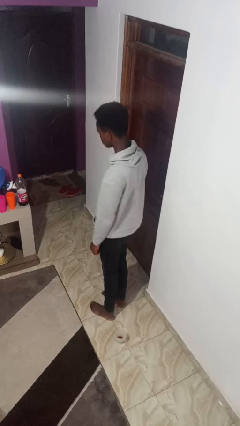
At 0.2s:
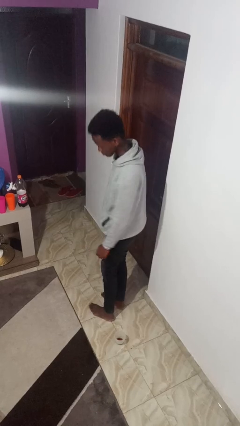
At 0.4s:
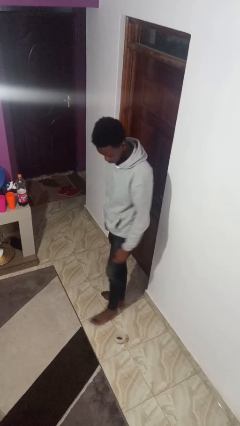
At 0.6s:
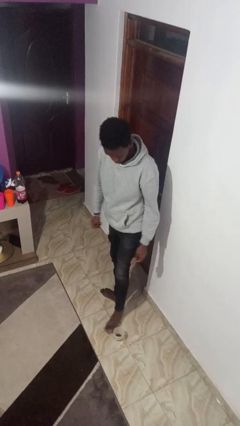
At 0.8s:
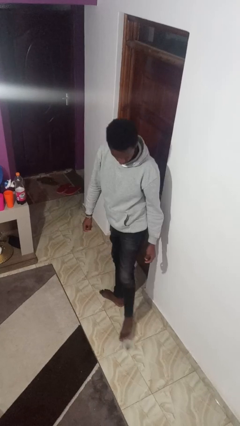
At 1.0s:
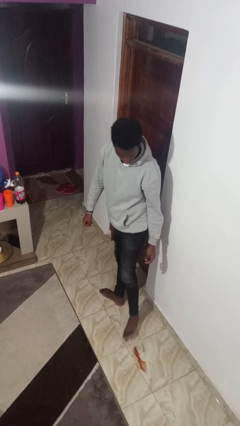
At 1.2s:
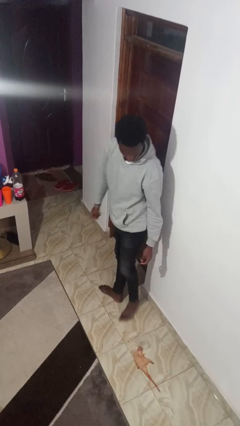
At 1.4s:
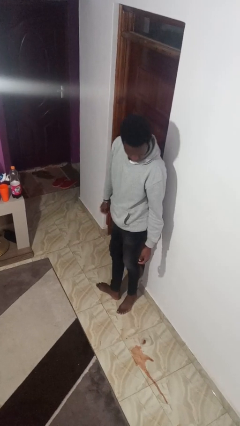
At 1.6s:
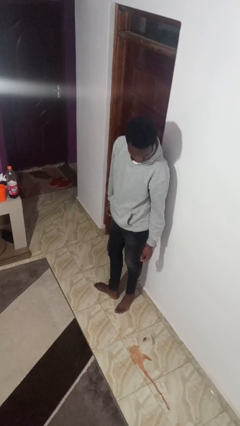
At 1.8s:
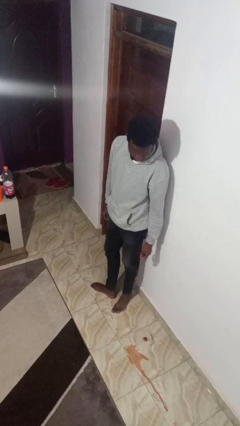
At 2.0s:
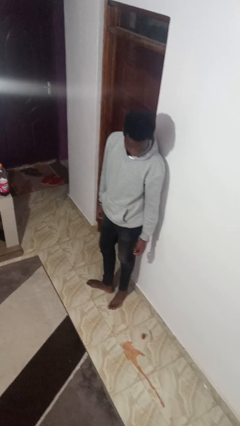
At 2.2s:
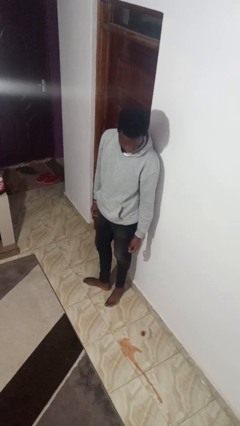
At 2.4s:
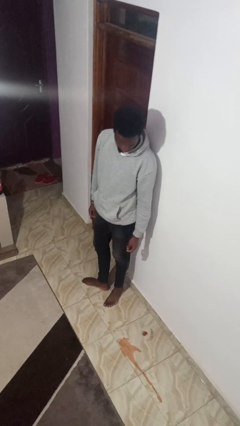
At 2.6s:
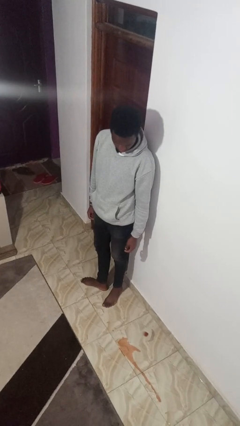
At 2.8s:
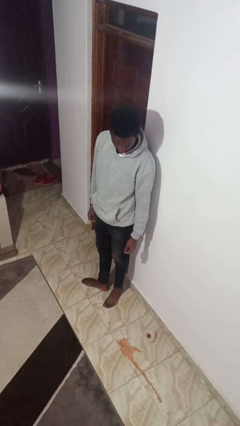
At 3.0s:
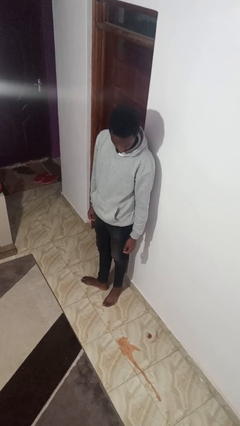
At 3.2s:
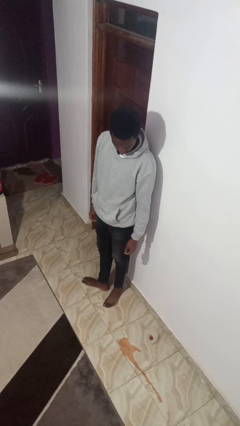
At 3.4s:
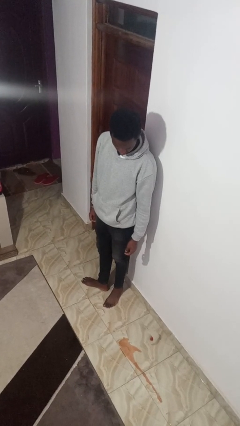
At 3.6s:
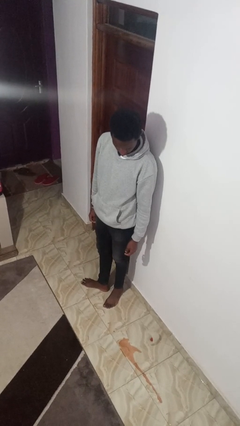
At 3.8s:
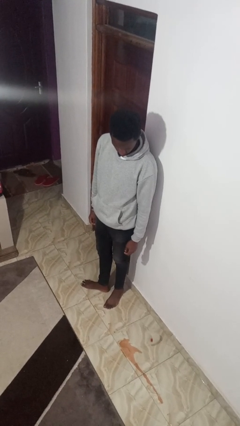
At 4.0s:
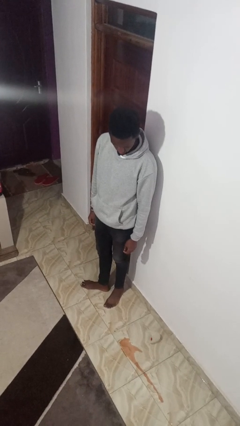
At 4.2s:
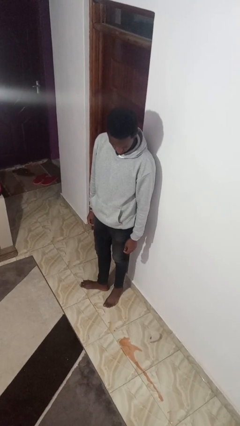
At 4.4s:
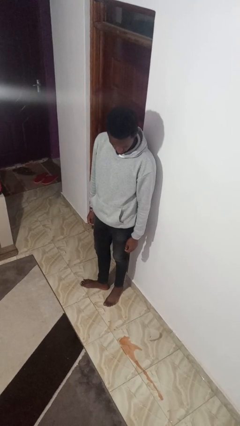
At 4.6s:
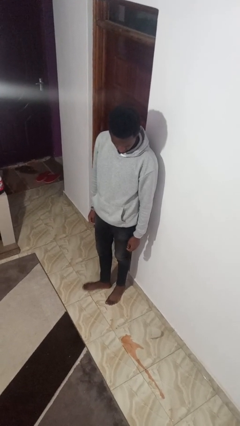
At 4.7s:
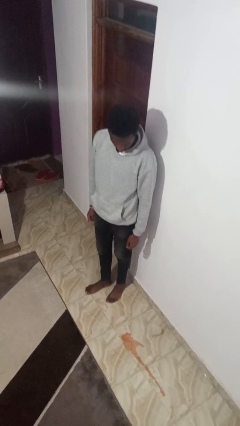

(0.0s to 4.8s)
person spills on floor

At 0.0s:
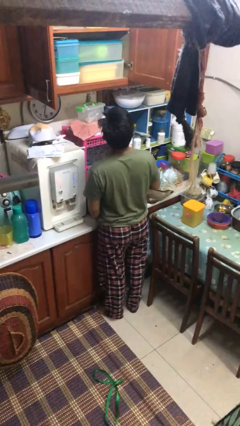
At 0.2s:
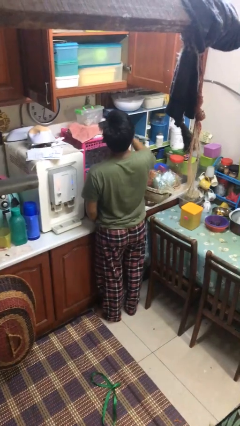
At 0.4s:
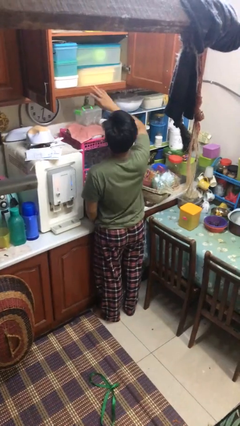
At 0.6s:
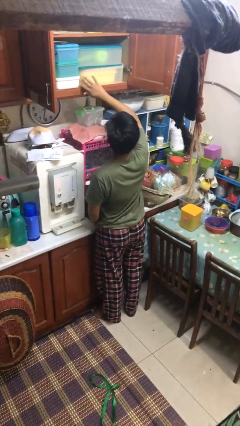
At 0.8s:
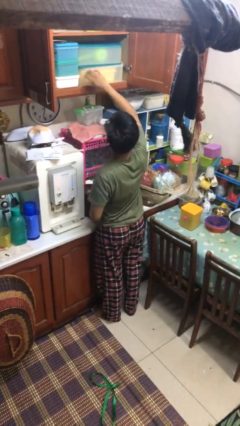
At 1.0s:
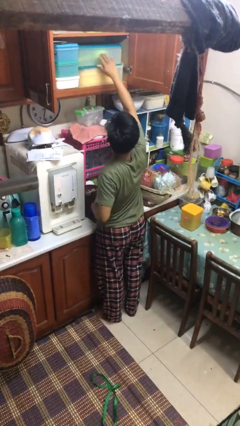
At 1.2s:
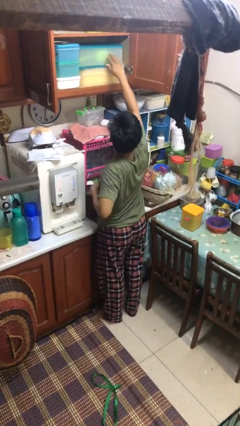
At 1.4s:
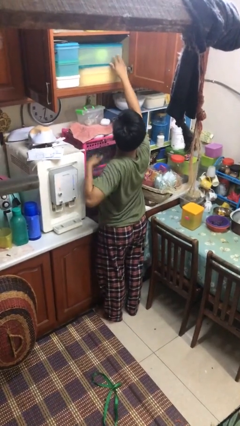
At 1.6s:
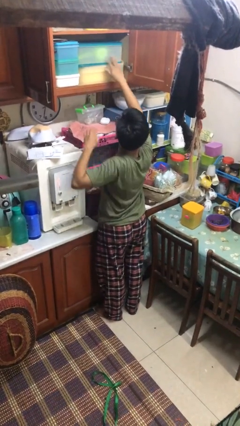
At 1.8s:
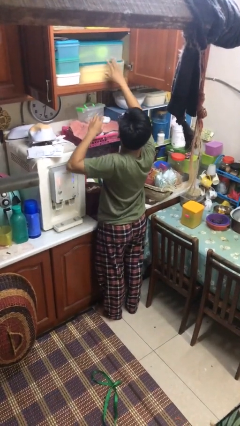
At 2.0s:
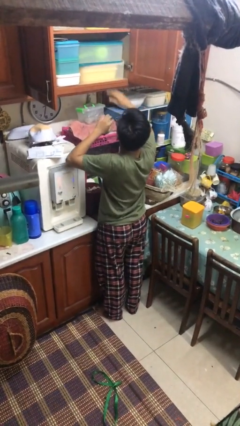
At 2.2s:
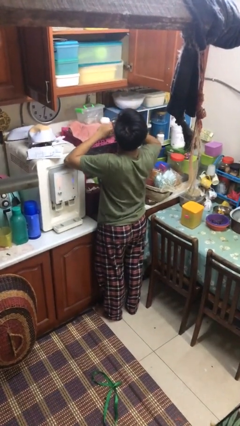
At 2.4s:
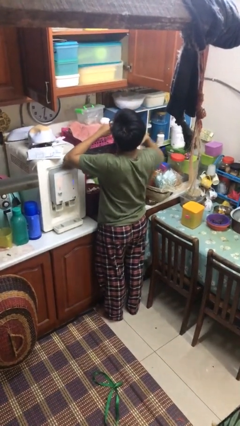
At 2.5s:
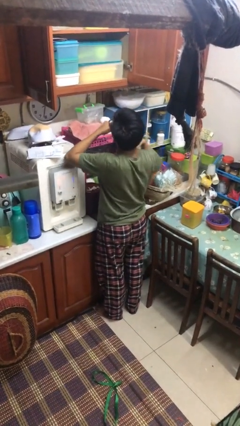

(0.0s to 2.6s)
person searches in kitchen drawer

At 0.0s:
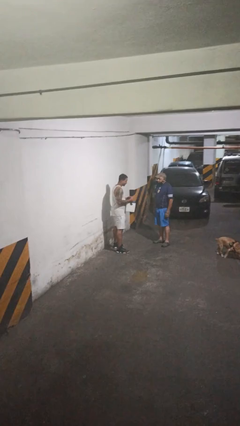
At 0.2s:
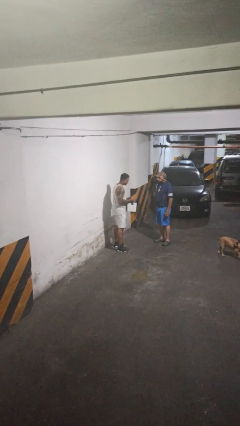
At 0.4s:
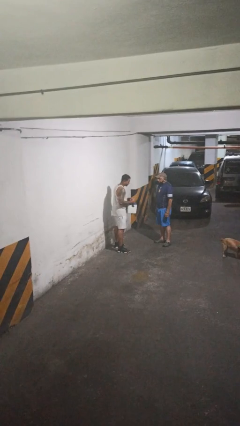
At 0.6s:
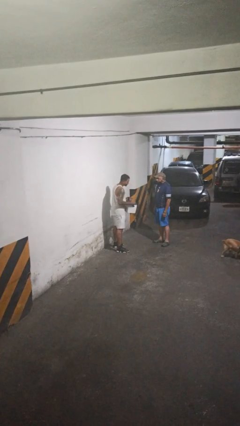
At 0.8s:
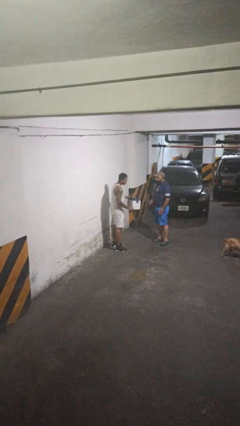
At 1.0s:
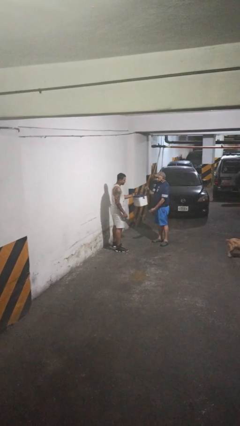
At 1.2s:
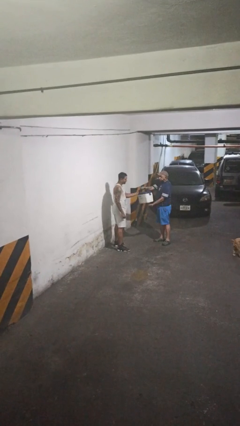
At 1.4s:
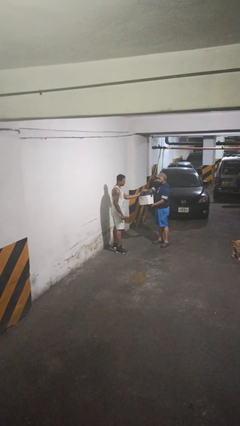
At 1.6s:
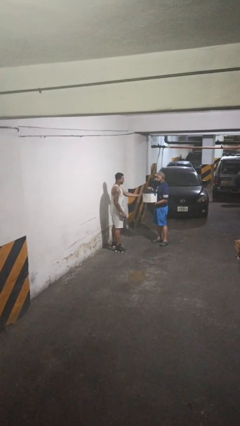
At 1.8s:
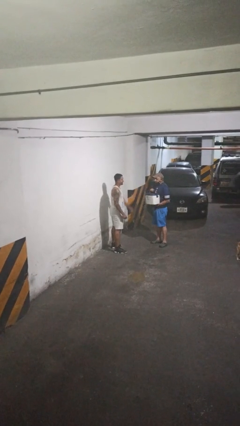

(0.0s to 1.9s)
person transfers object to person

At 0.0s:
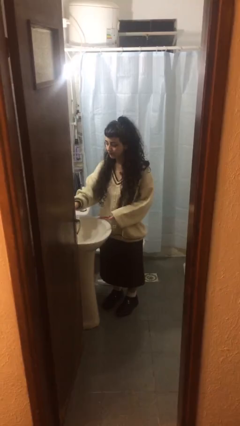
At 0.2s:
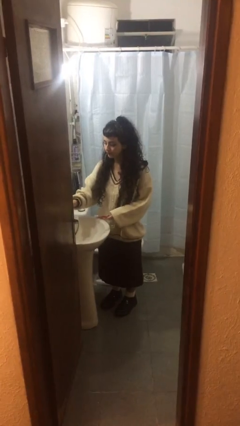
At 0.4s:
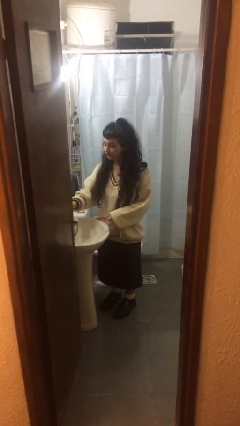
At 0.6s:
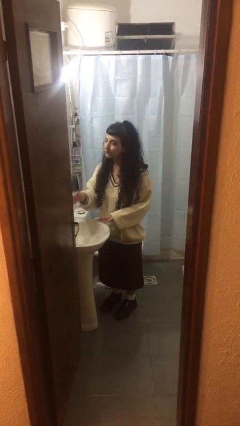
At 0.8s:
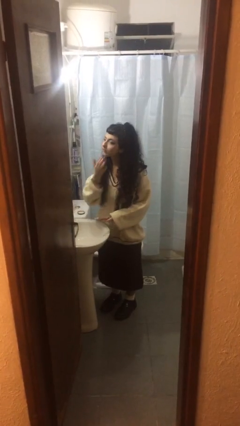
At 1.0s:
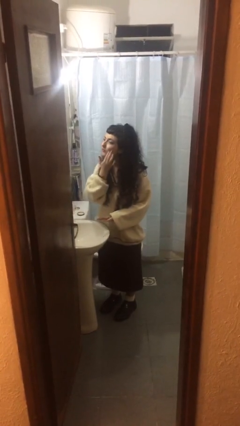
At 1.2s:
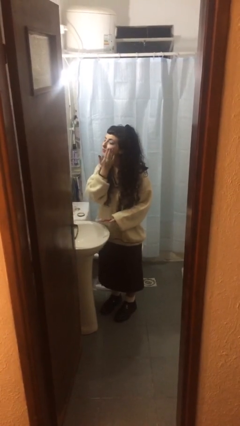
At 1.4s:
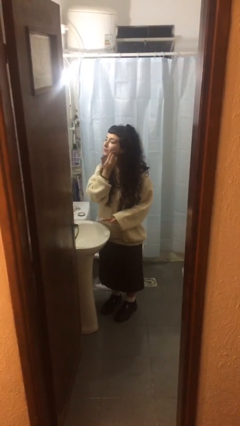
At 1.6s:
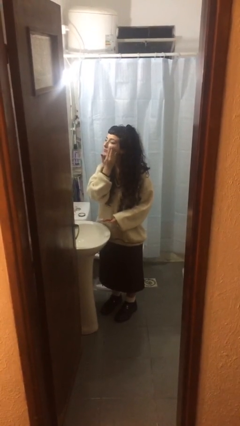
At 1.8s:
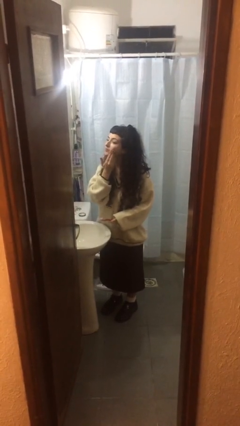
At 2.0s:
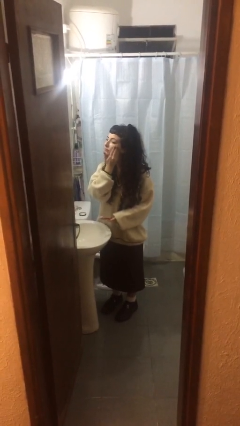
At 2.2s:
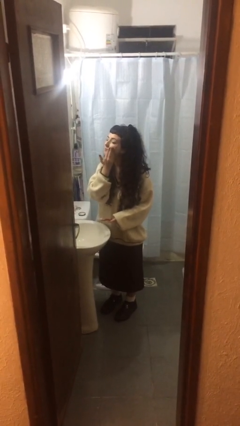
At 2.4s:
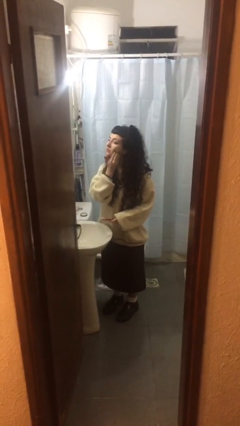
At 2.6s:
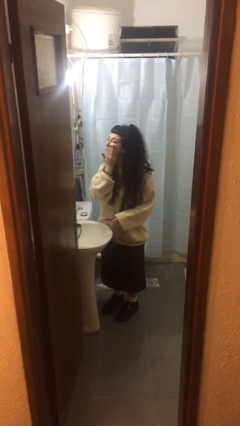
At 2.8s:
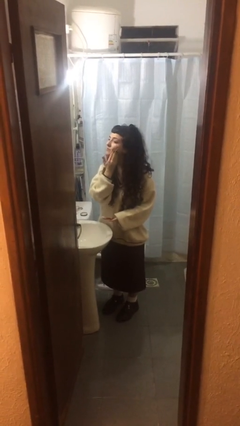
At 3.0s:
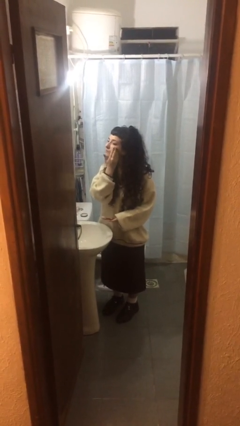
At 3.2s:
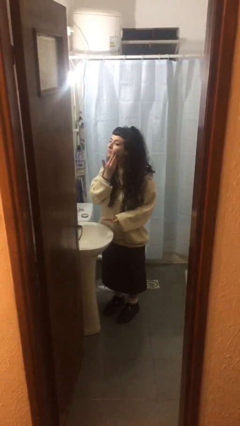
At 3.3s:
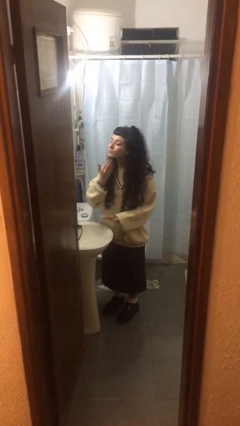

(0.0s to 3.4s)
person applies shaving cream

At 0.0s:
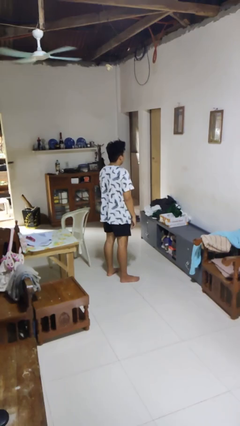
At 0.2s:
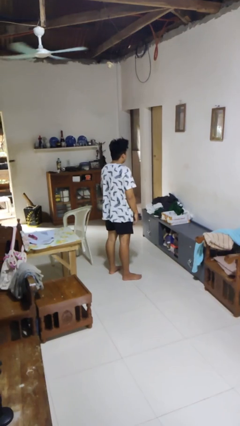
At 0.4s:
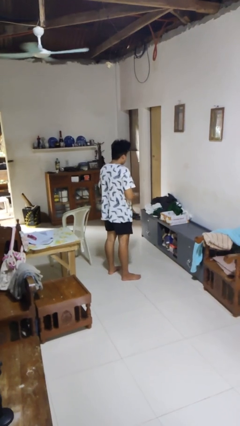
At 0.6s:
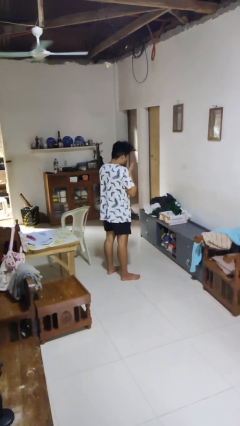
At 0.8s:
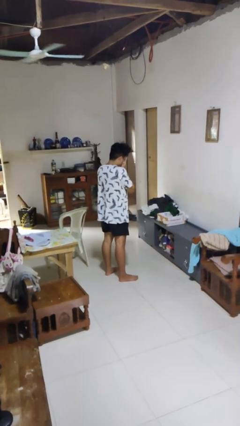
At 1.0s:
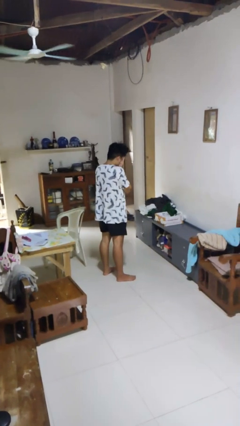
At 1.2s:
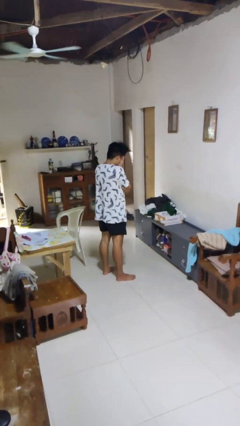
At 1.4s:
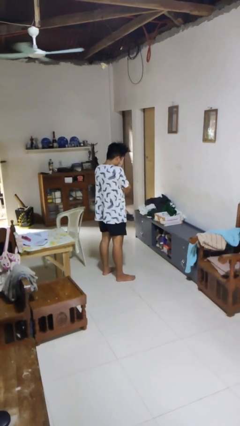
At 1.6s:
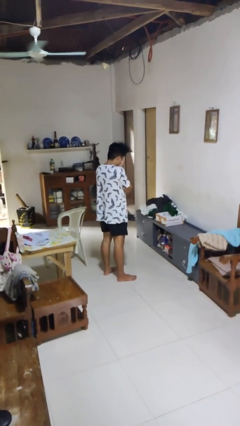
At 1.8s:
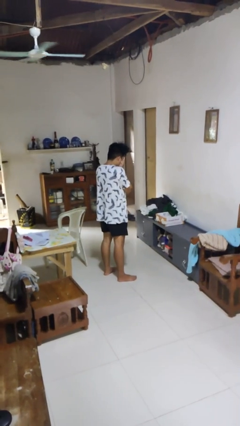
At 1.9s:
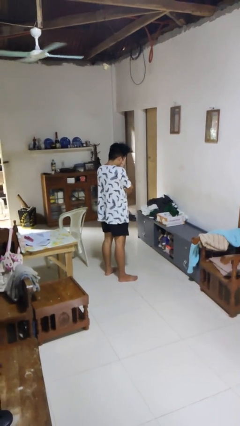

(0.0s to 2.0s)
person covers face with hands

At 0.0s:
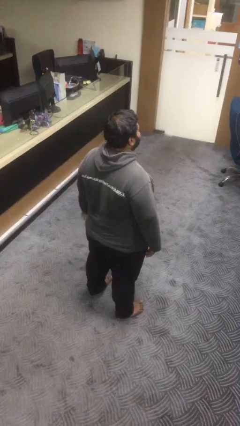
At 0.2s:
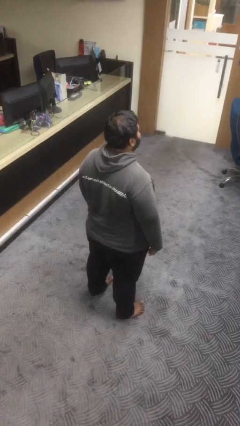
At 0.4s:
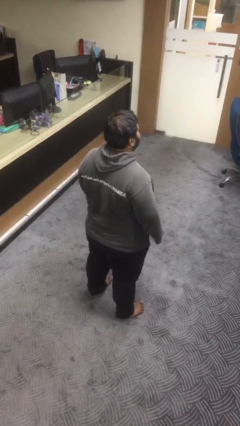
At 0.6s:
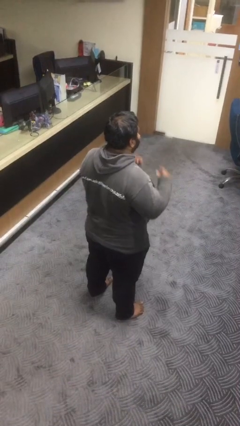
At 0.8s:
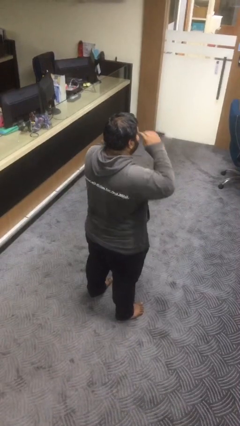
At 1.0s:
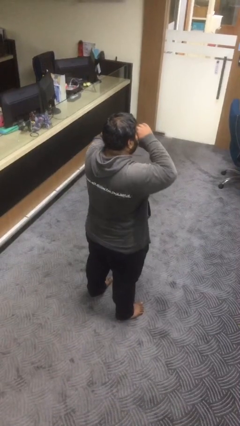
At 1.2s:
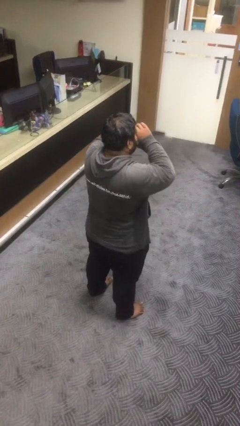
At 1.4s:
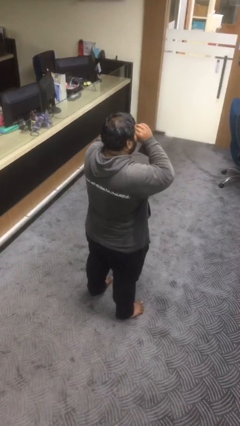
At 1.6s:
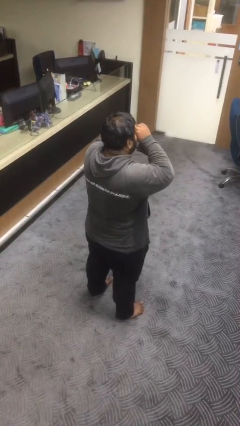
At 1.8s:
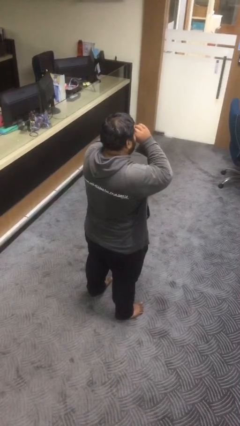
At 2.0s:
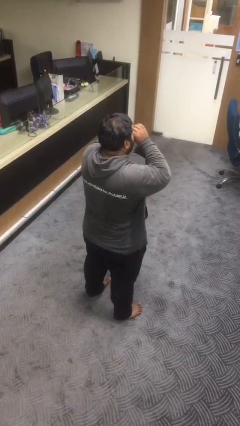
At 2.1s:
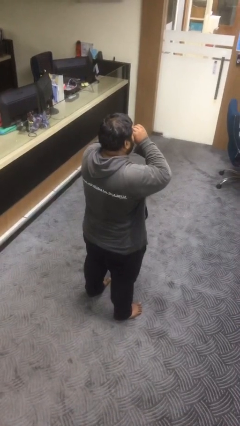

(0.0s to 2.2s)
person rubs eyes

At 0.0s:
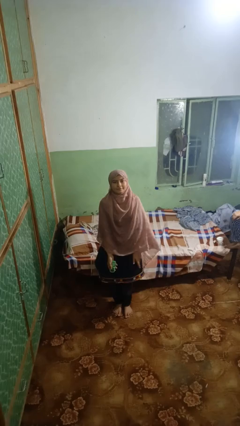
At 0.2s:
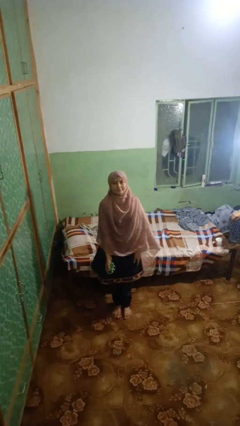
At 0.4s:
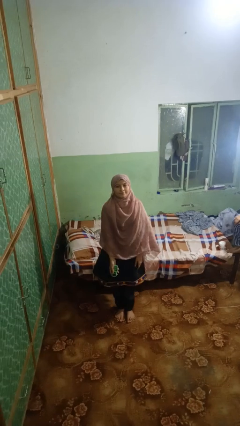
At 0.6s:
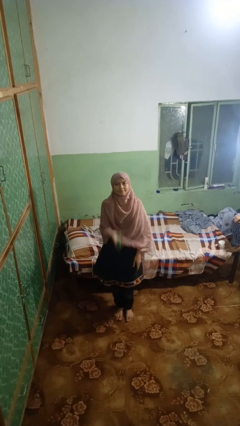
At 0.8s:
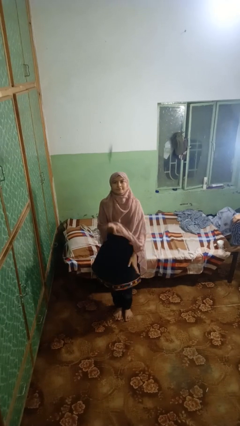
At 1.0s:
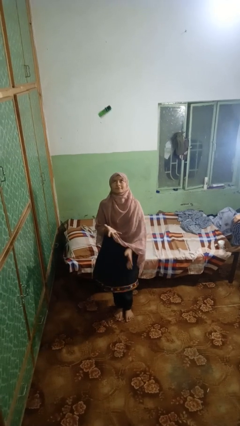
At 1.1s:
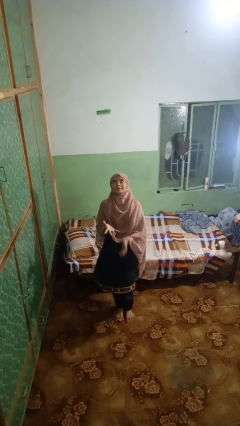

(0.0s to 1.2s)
person throws object into air
